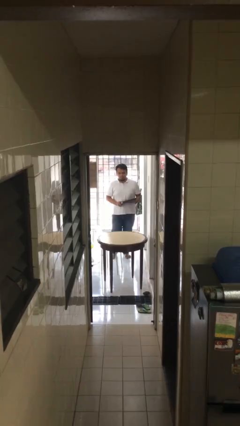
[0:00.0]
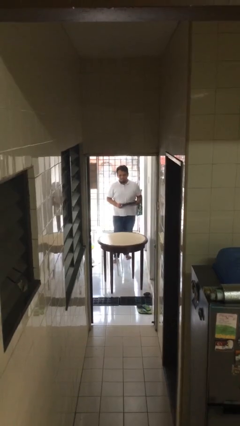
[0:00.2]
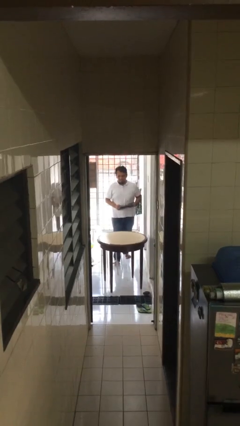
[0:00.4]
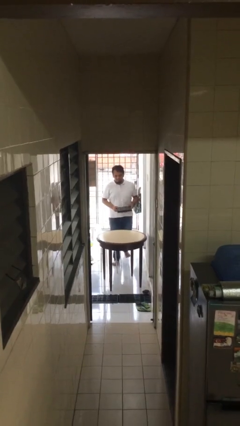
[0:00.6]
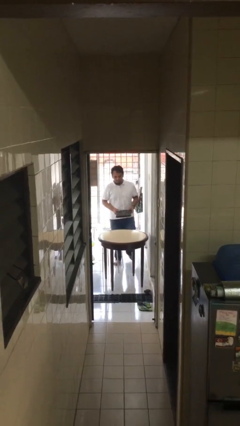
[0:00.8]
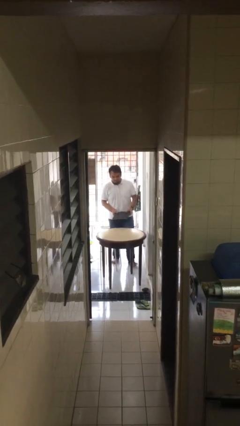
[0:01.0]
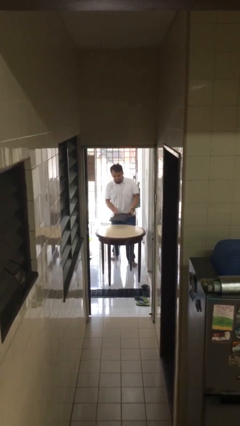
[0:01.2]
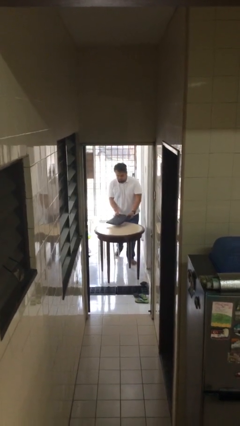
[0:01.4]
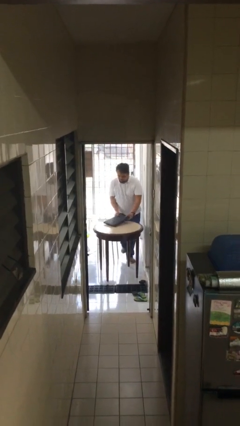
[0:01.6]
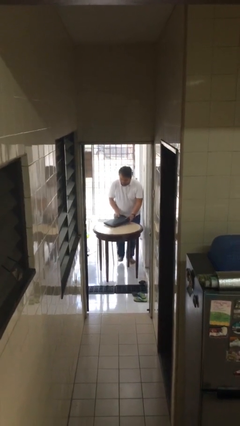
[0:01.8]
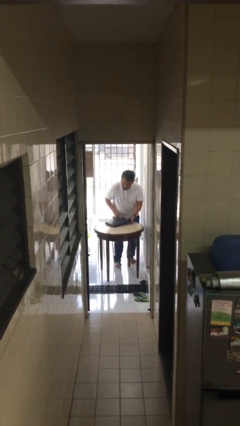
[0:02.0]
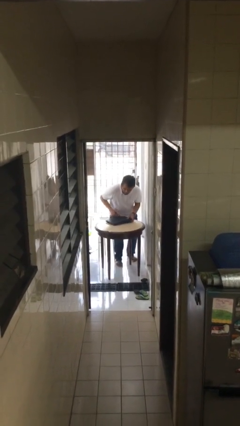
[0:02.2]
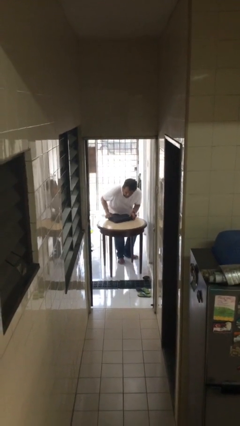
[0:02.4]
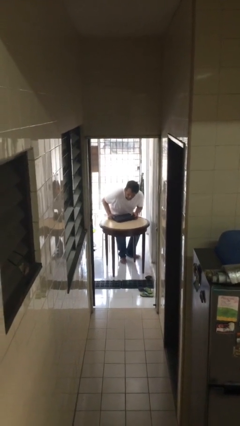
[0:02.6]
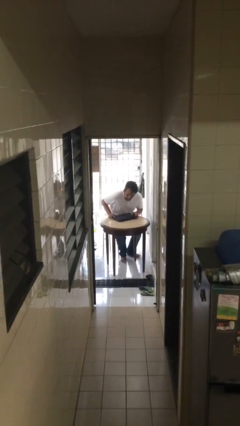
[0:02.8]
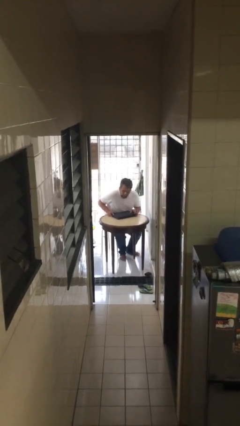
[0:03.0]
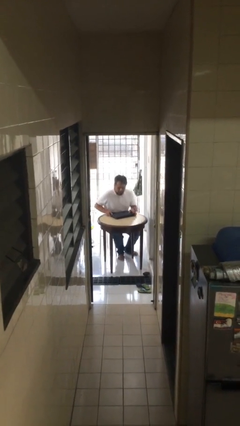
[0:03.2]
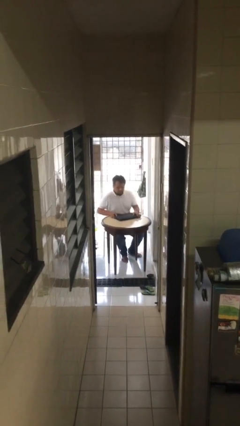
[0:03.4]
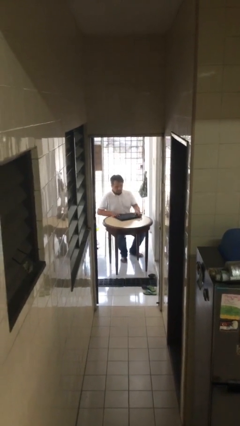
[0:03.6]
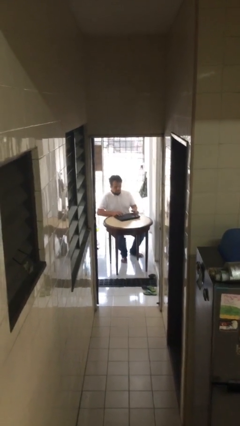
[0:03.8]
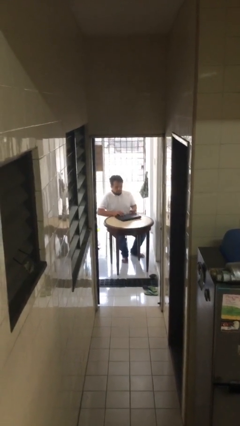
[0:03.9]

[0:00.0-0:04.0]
person sits down

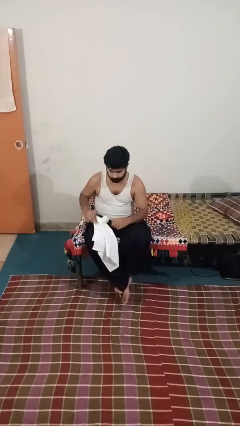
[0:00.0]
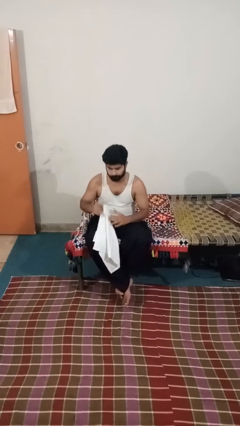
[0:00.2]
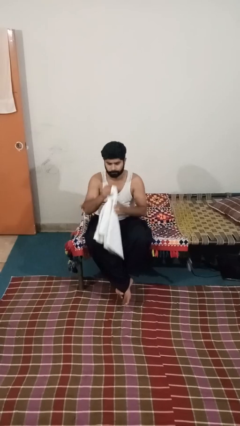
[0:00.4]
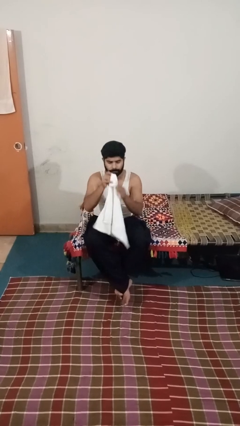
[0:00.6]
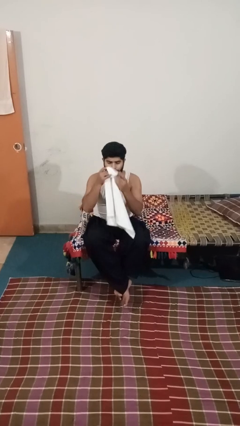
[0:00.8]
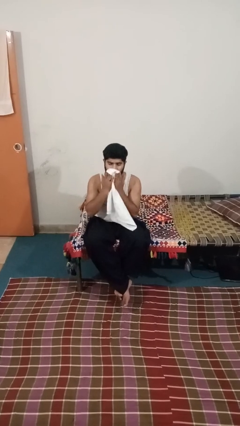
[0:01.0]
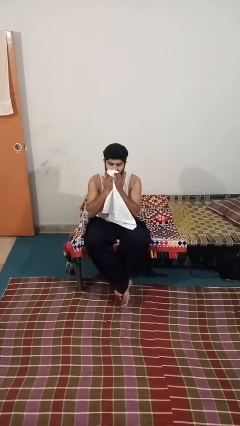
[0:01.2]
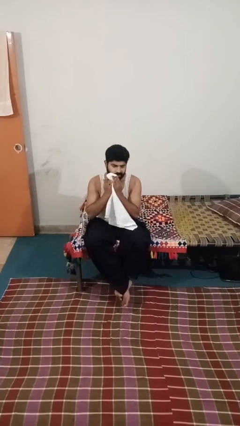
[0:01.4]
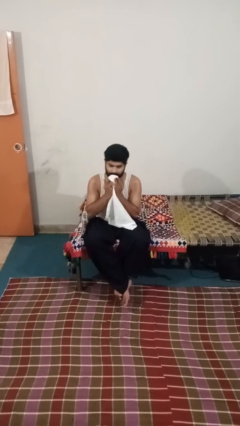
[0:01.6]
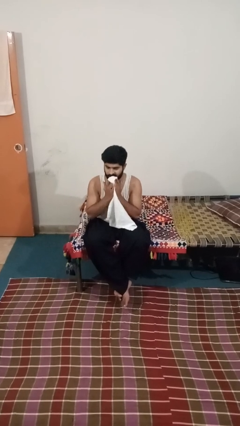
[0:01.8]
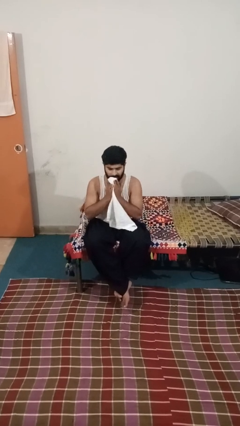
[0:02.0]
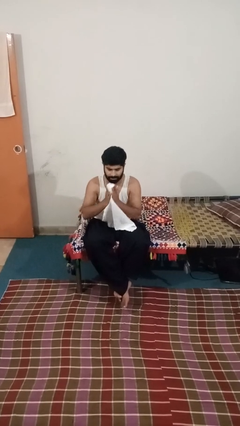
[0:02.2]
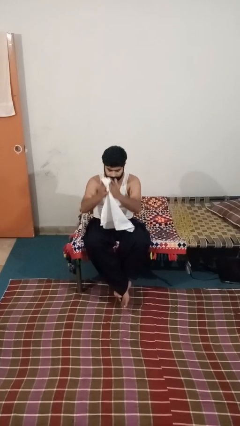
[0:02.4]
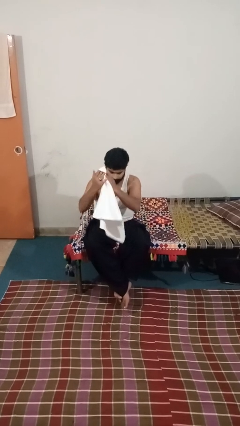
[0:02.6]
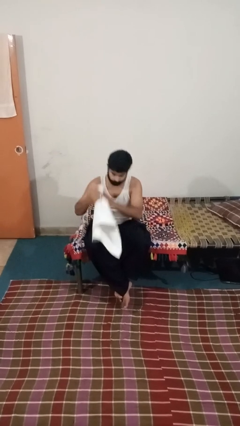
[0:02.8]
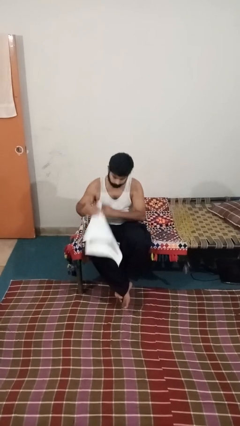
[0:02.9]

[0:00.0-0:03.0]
person wipes mouth with napkin

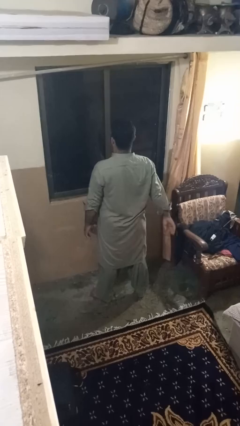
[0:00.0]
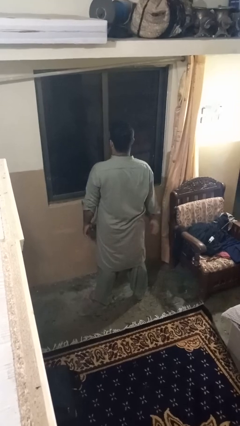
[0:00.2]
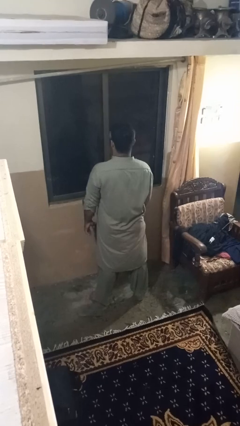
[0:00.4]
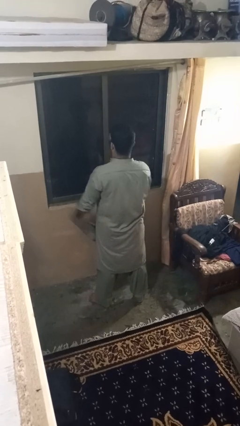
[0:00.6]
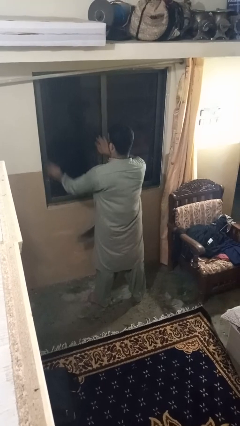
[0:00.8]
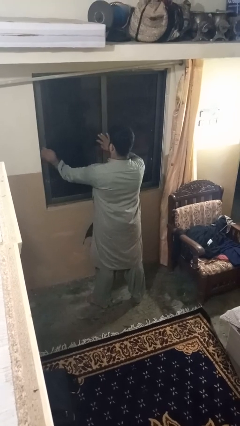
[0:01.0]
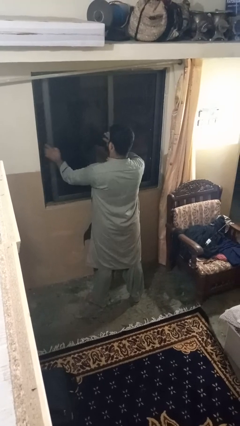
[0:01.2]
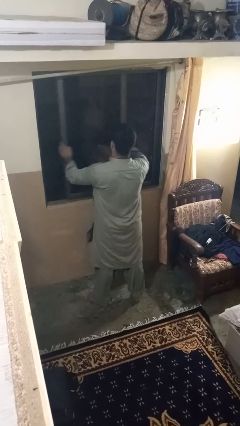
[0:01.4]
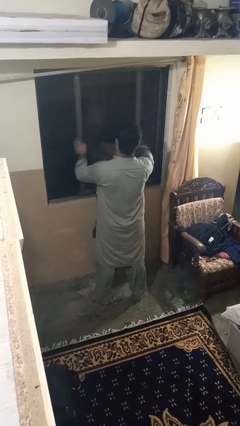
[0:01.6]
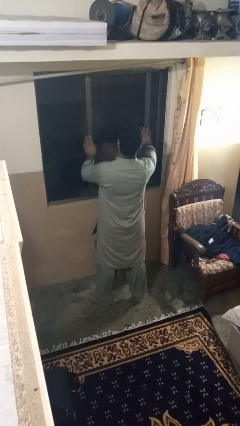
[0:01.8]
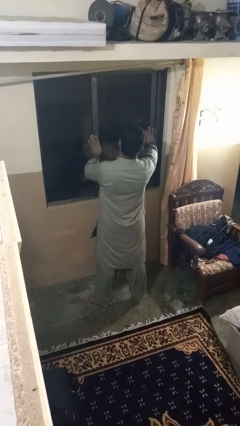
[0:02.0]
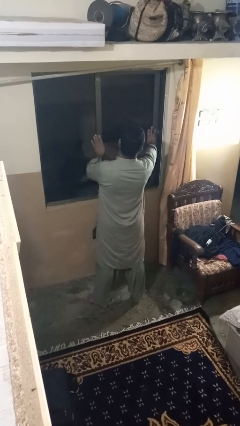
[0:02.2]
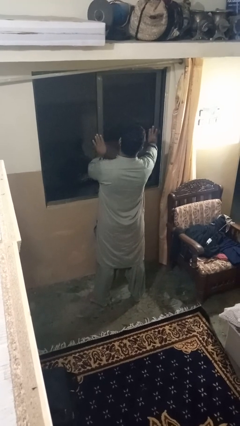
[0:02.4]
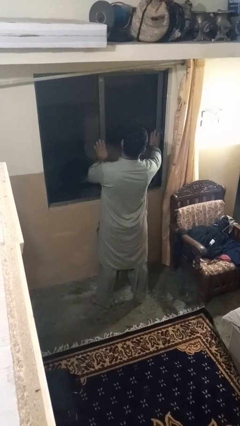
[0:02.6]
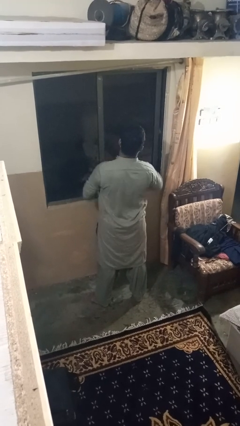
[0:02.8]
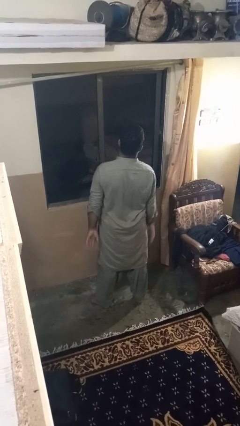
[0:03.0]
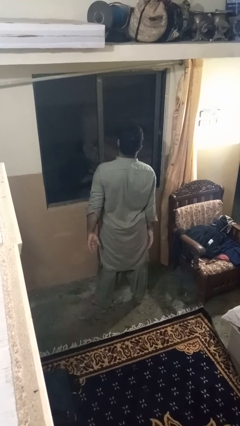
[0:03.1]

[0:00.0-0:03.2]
person opens home window

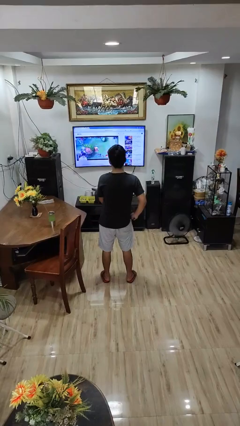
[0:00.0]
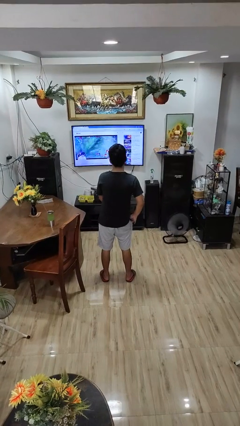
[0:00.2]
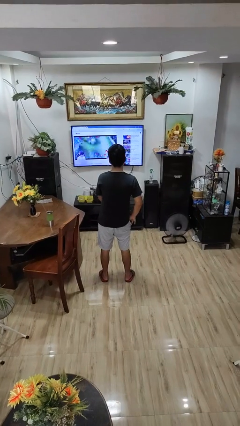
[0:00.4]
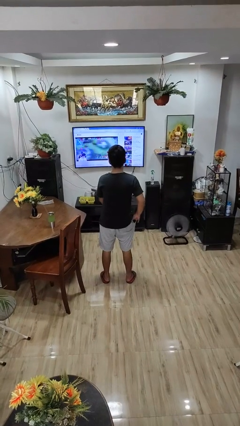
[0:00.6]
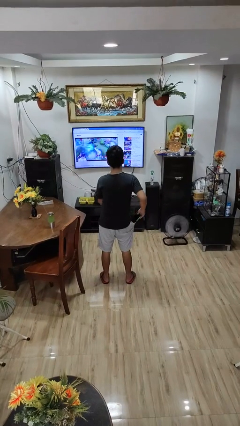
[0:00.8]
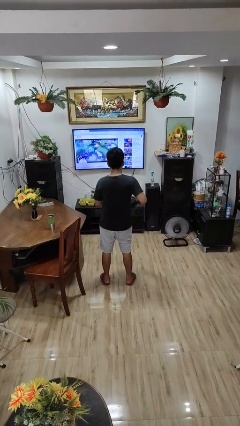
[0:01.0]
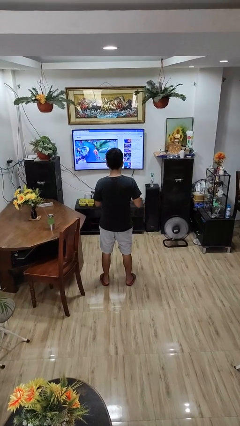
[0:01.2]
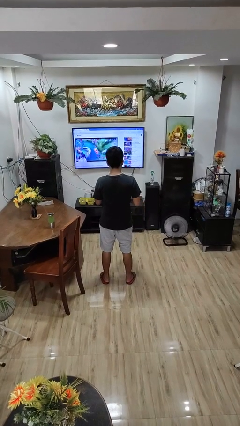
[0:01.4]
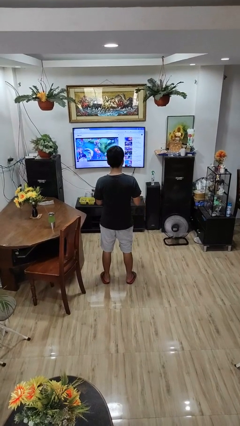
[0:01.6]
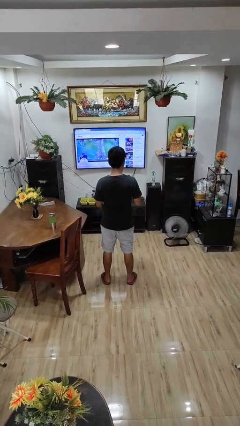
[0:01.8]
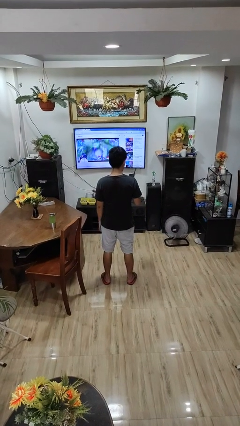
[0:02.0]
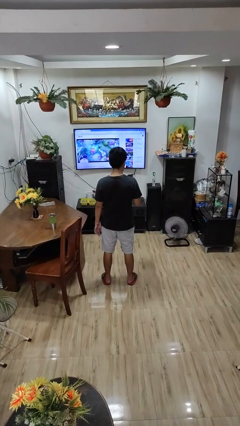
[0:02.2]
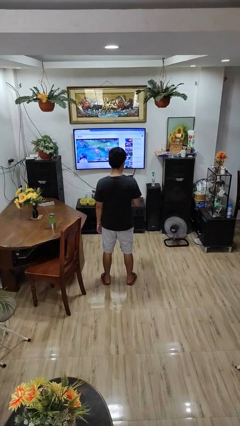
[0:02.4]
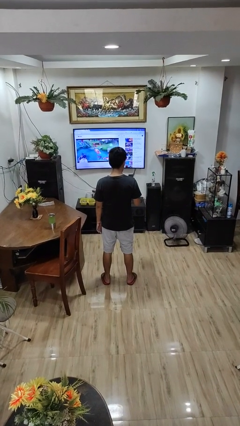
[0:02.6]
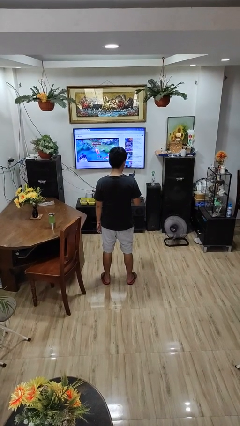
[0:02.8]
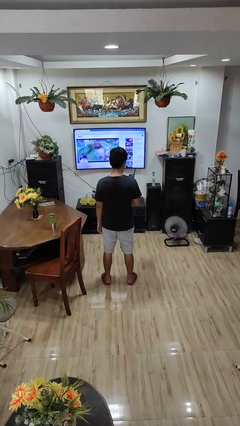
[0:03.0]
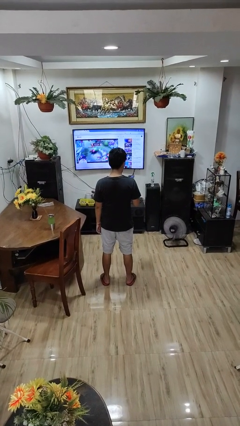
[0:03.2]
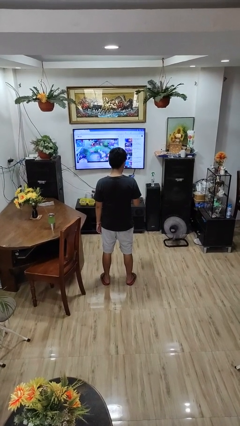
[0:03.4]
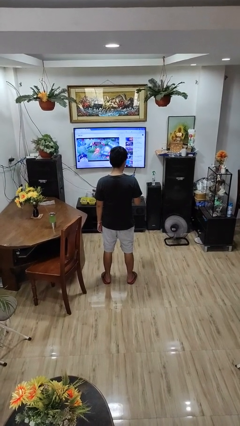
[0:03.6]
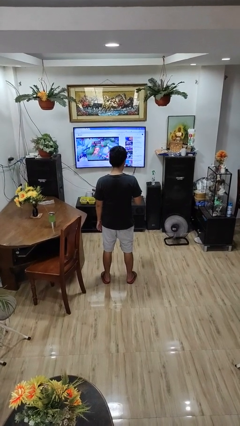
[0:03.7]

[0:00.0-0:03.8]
person takes phone from pocket

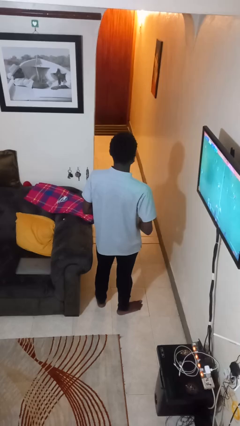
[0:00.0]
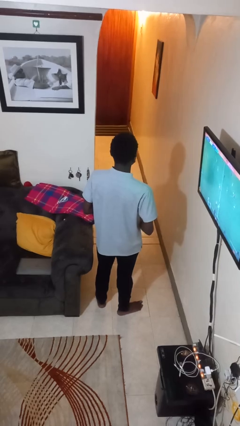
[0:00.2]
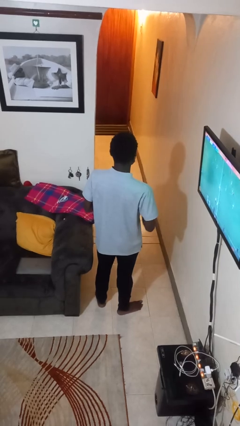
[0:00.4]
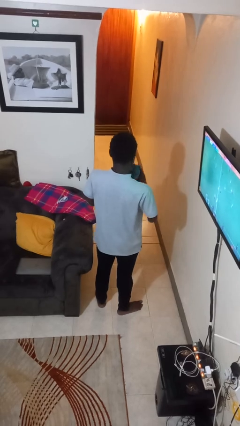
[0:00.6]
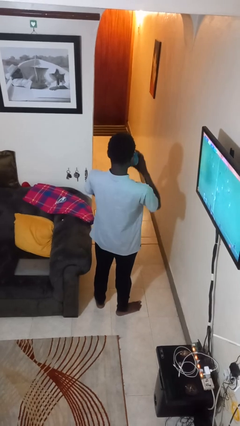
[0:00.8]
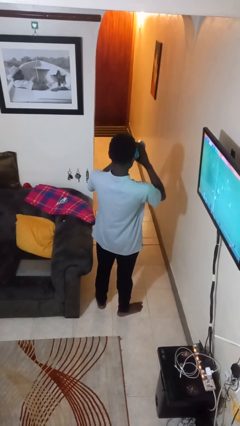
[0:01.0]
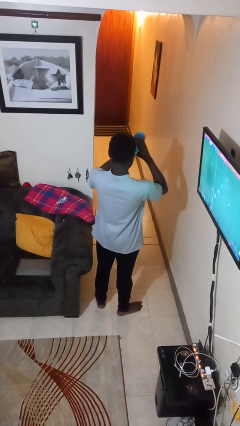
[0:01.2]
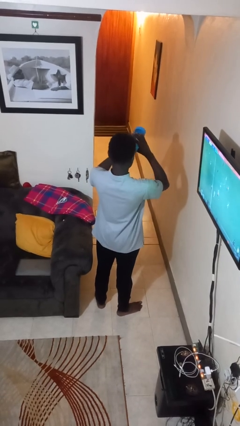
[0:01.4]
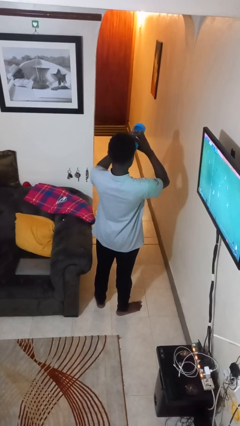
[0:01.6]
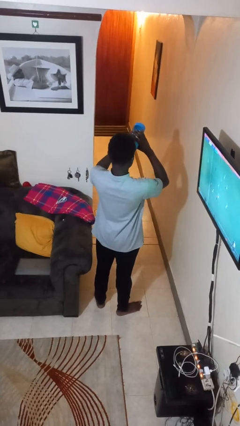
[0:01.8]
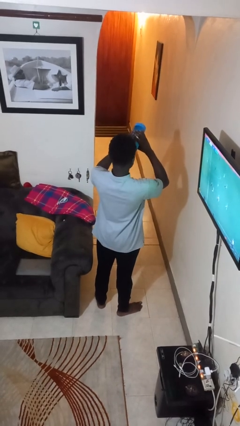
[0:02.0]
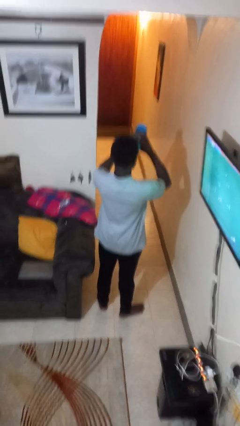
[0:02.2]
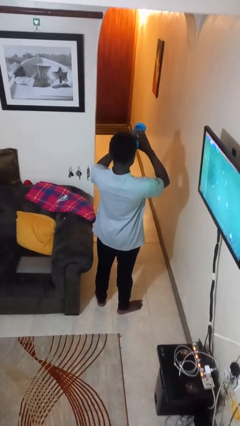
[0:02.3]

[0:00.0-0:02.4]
person drinks from bottle

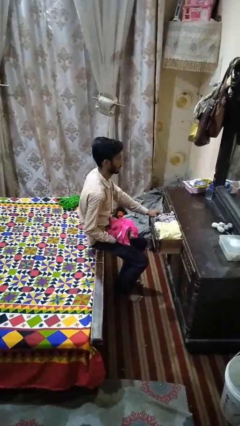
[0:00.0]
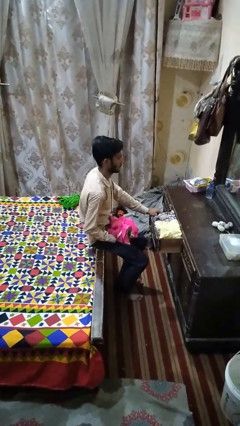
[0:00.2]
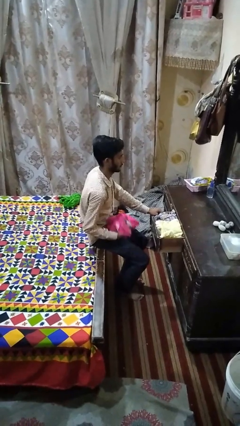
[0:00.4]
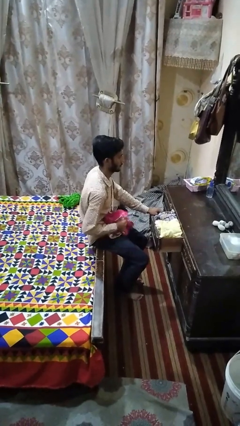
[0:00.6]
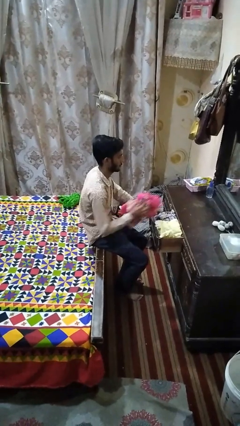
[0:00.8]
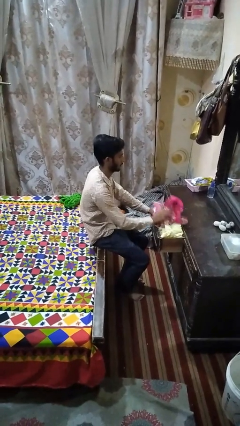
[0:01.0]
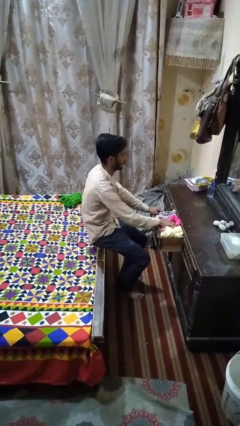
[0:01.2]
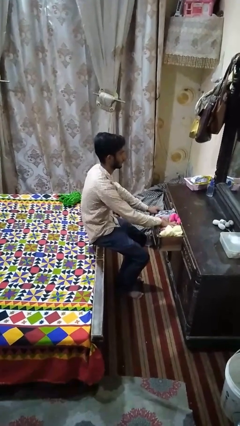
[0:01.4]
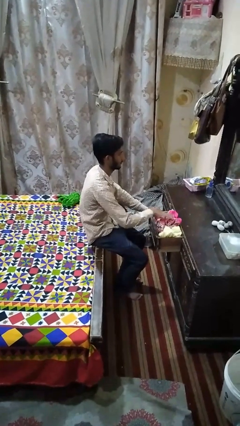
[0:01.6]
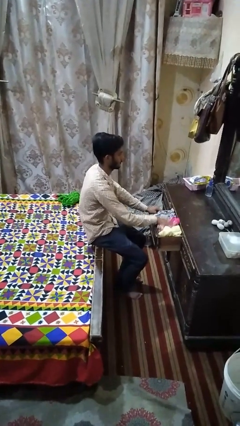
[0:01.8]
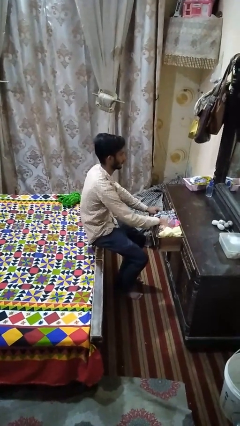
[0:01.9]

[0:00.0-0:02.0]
person puts clothes into dresser
